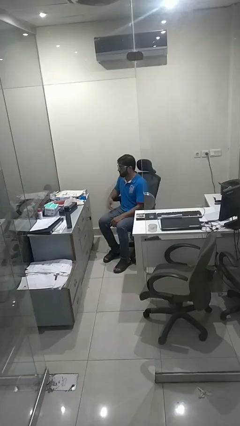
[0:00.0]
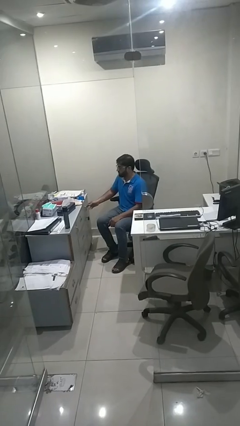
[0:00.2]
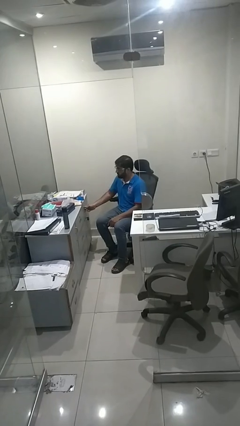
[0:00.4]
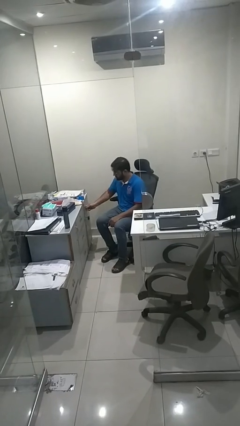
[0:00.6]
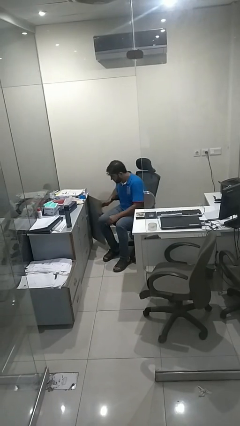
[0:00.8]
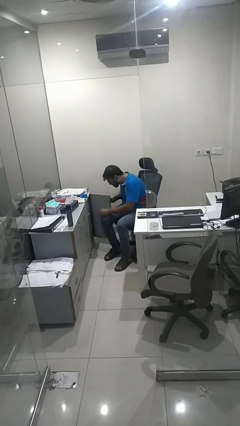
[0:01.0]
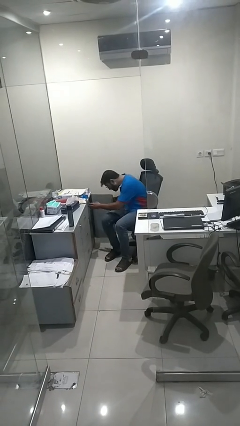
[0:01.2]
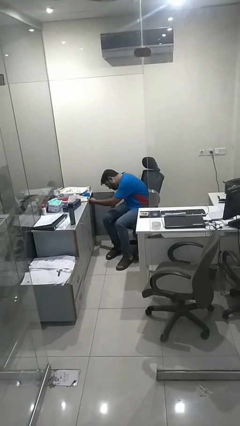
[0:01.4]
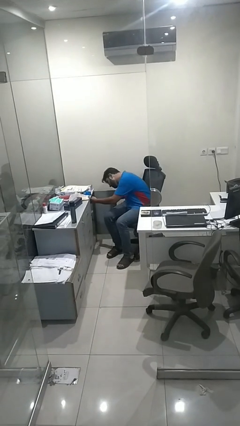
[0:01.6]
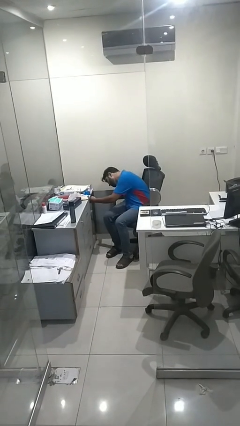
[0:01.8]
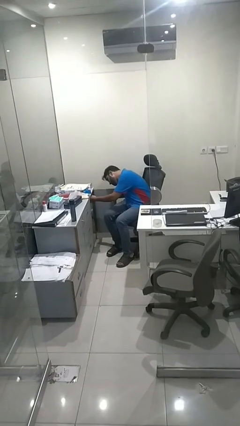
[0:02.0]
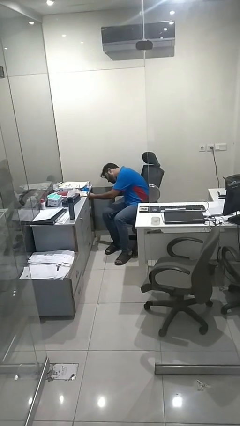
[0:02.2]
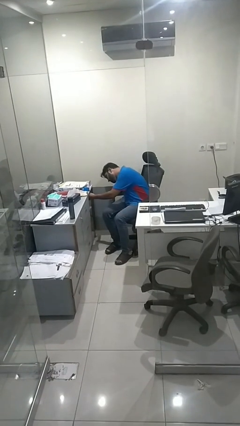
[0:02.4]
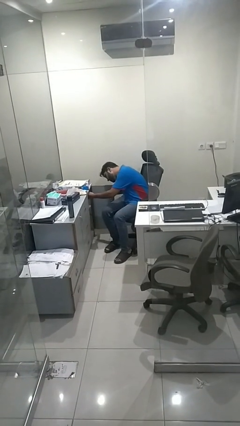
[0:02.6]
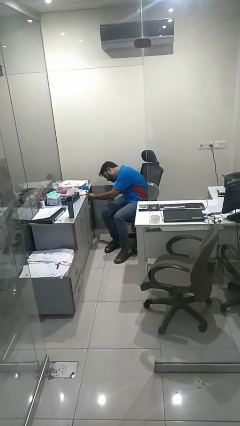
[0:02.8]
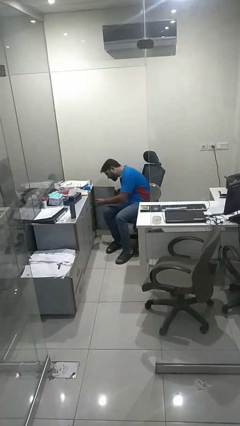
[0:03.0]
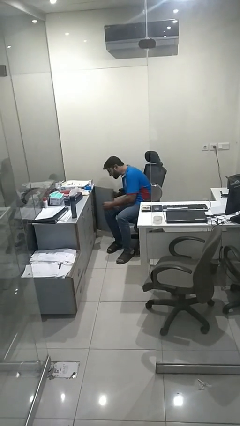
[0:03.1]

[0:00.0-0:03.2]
person searches in cabinet

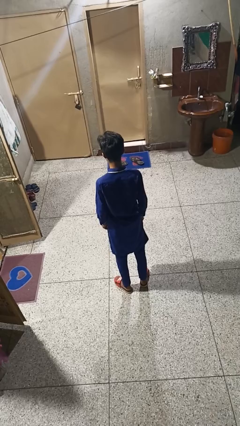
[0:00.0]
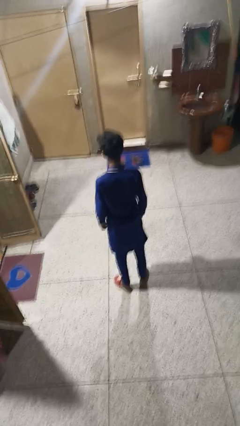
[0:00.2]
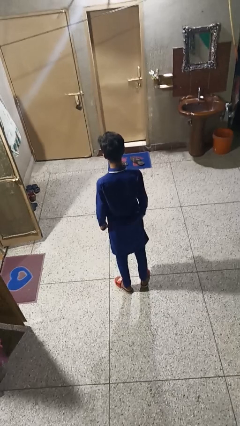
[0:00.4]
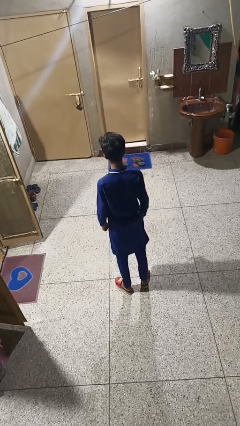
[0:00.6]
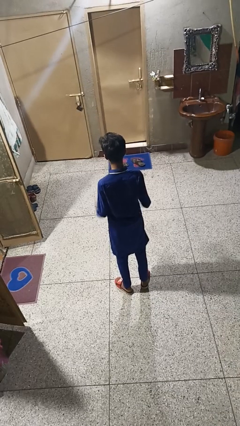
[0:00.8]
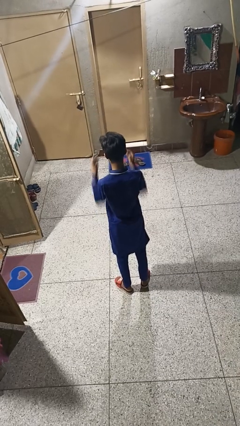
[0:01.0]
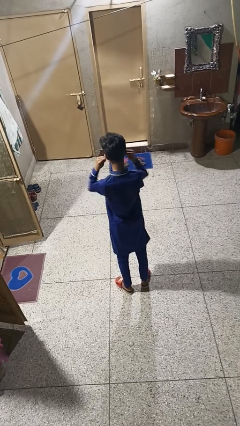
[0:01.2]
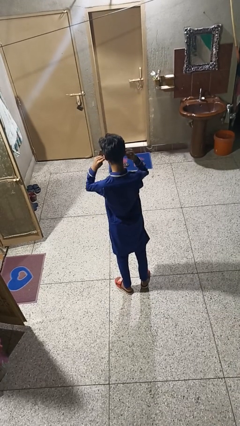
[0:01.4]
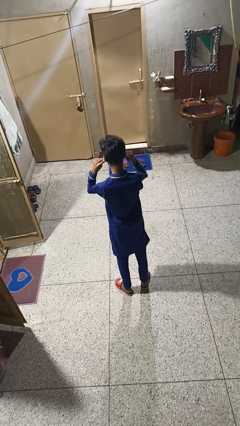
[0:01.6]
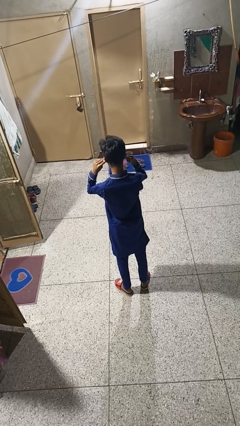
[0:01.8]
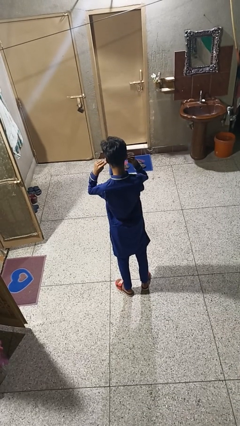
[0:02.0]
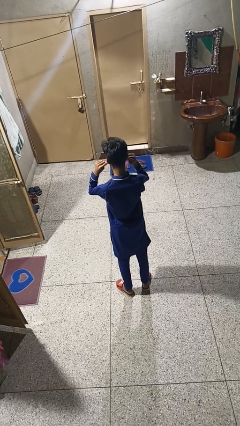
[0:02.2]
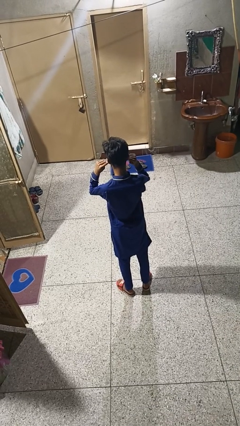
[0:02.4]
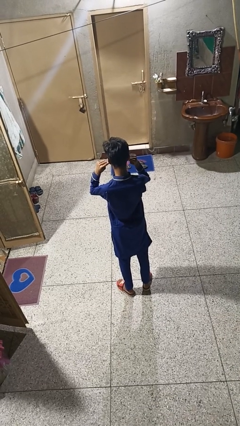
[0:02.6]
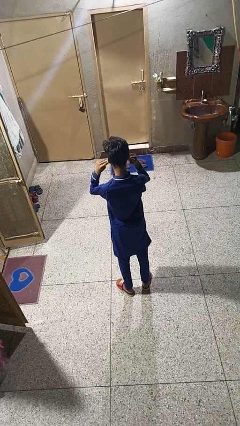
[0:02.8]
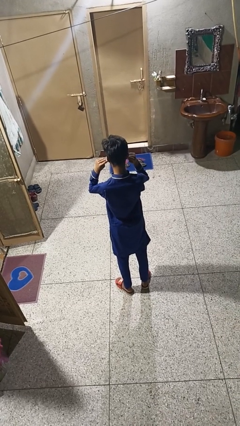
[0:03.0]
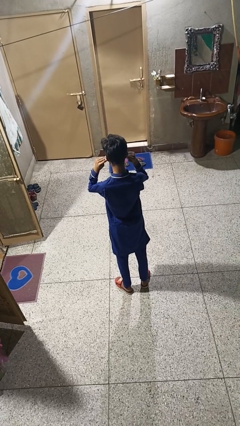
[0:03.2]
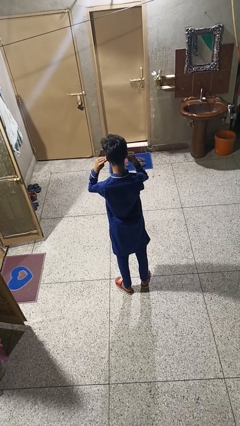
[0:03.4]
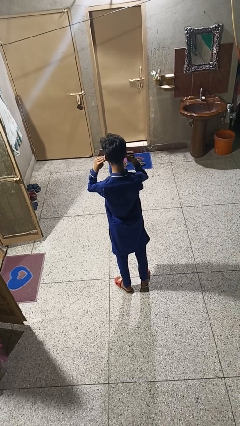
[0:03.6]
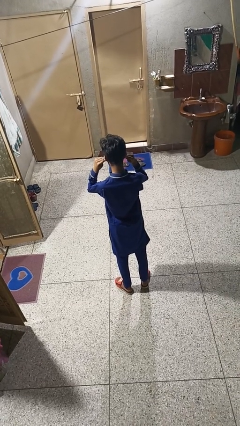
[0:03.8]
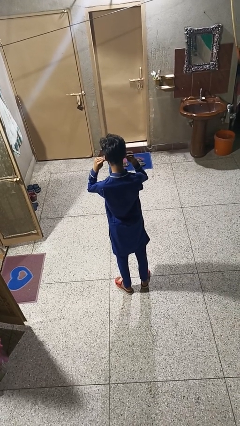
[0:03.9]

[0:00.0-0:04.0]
person puts fingers in ear

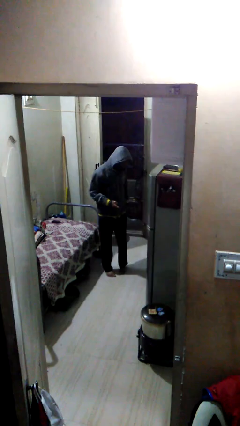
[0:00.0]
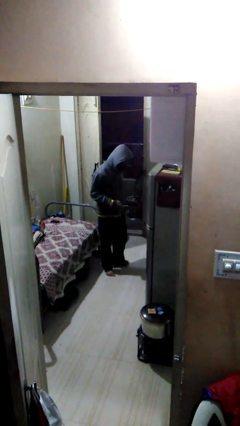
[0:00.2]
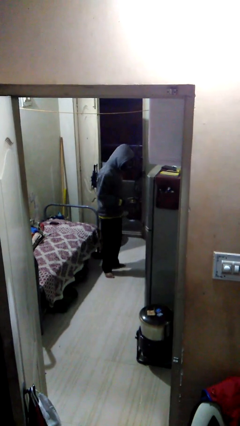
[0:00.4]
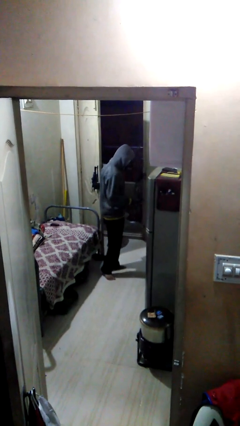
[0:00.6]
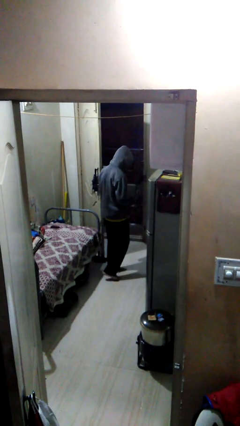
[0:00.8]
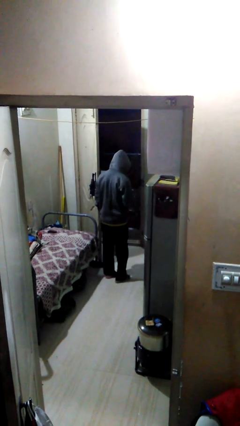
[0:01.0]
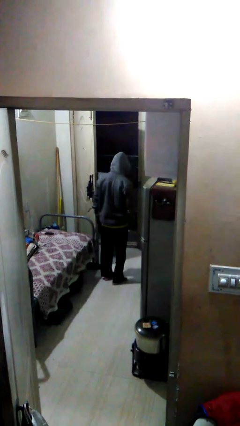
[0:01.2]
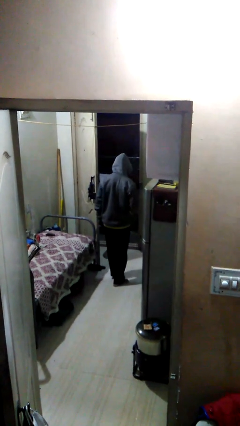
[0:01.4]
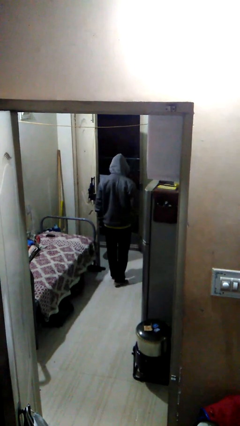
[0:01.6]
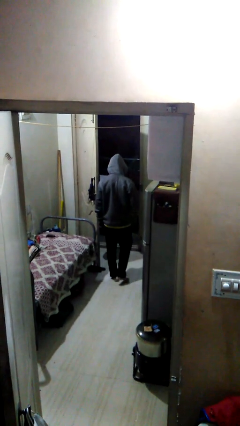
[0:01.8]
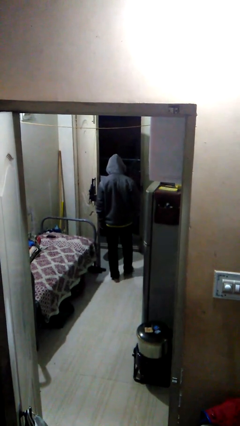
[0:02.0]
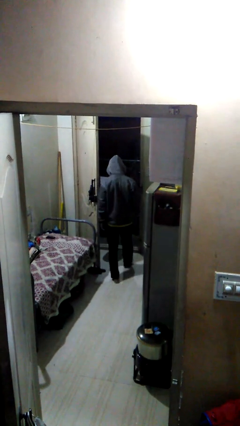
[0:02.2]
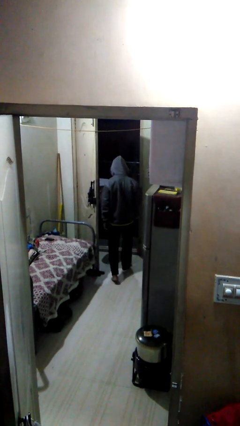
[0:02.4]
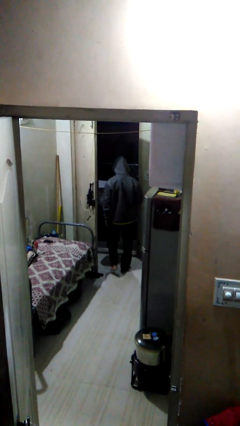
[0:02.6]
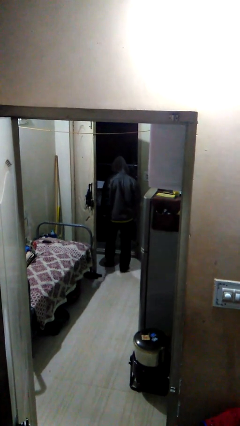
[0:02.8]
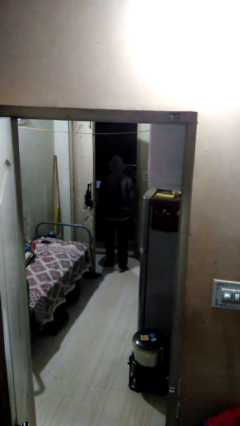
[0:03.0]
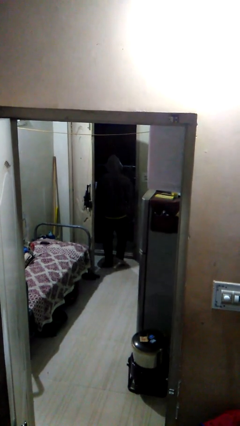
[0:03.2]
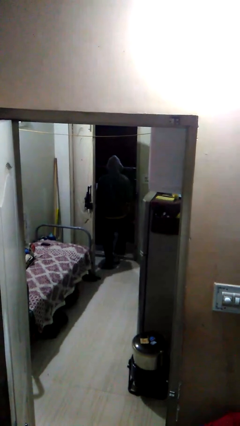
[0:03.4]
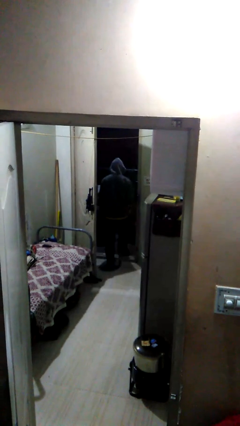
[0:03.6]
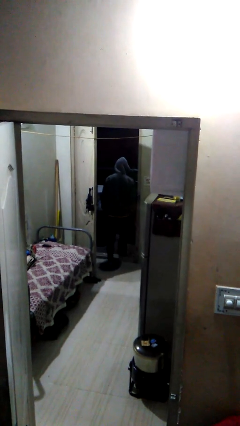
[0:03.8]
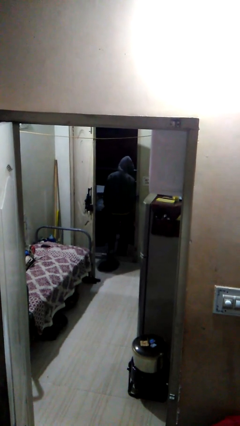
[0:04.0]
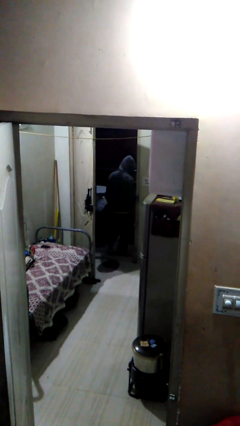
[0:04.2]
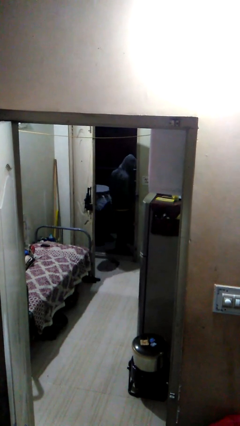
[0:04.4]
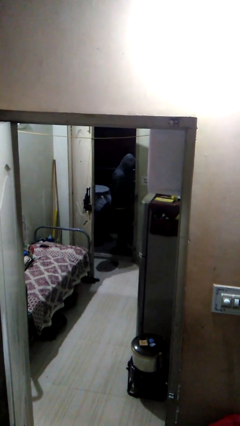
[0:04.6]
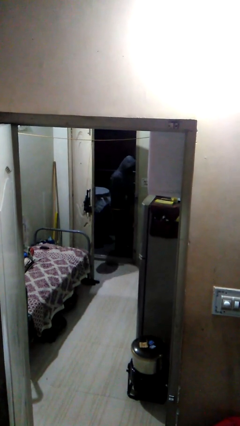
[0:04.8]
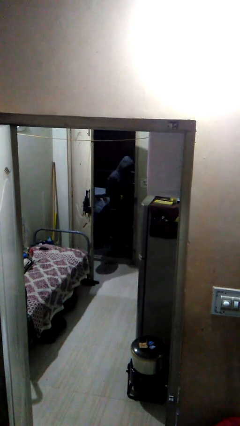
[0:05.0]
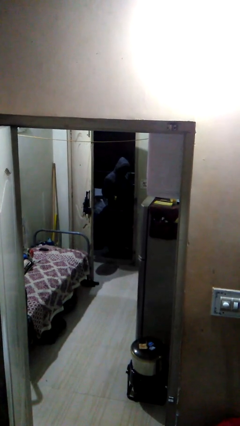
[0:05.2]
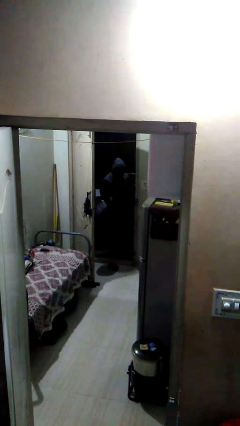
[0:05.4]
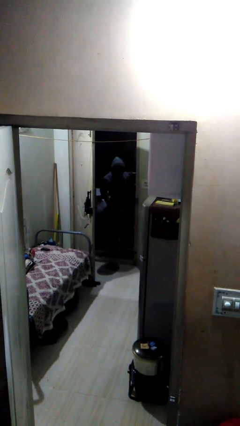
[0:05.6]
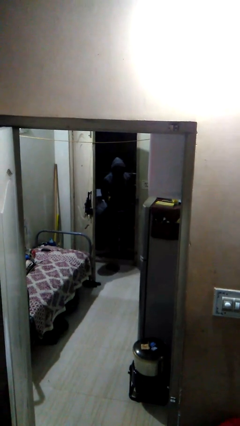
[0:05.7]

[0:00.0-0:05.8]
person exits scene through structure

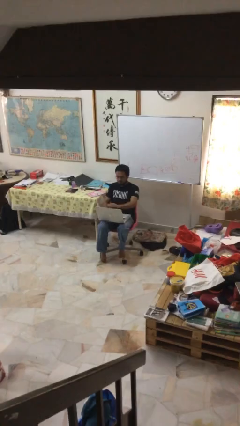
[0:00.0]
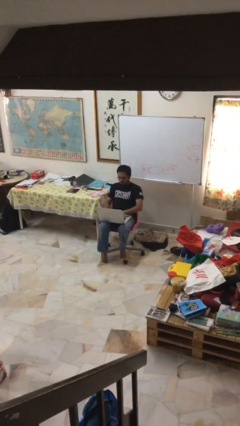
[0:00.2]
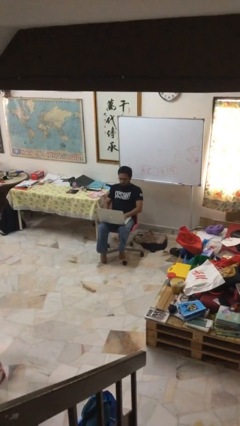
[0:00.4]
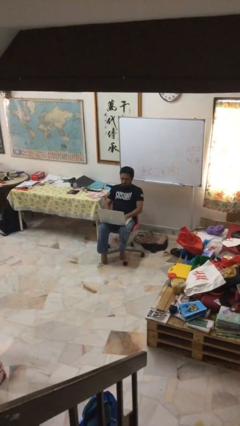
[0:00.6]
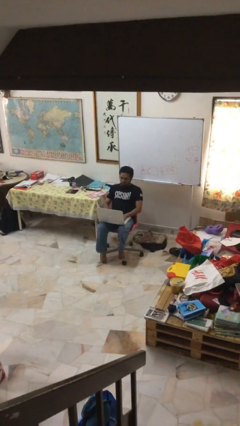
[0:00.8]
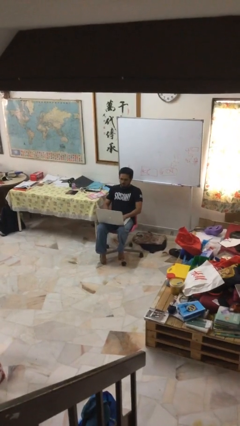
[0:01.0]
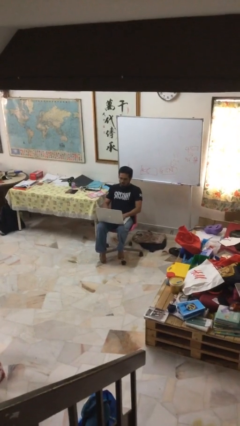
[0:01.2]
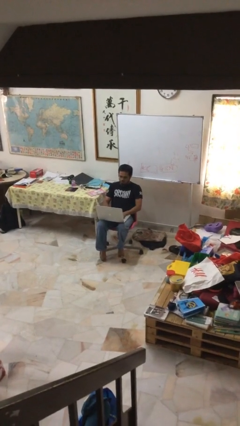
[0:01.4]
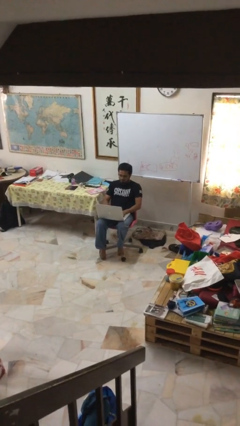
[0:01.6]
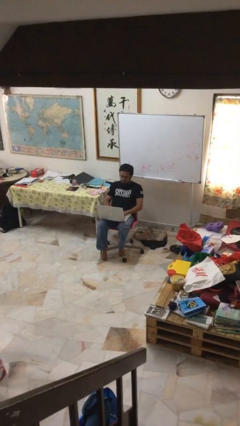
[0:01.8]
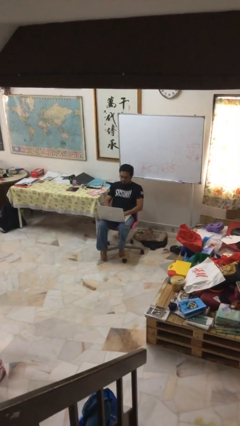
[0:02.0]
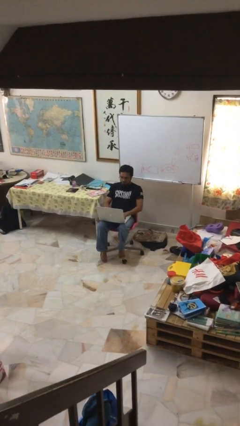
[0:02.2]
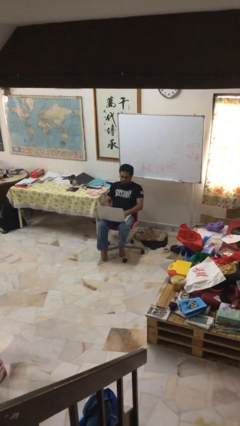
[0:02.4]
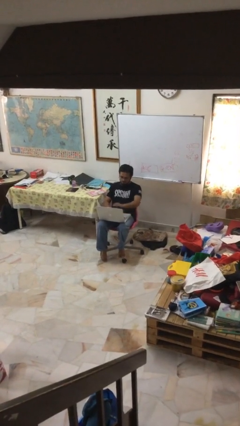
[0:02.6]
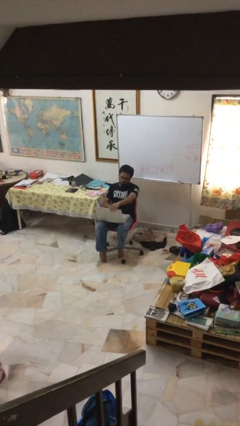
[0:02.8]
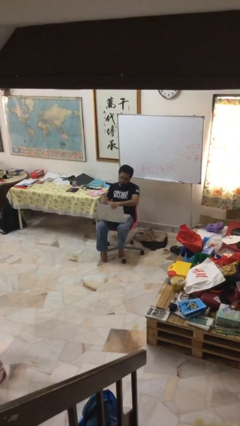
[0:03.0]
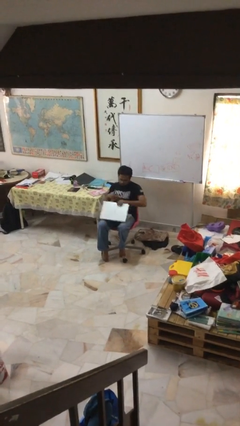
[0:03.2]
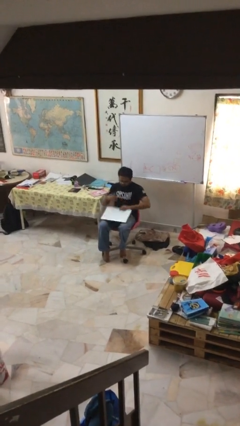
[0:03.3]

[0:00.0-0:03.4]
person interacts with laptop

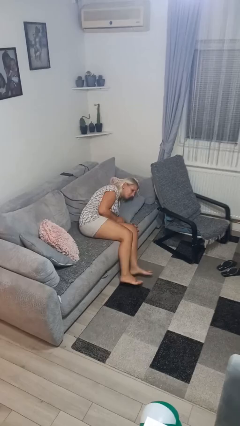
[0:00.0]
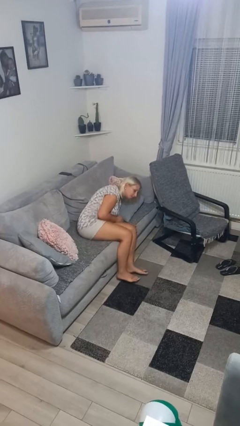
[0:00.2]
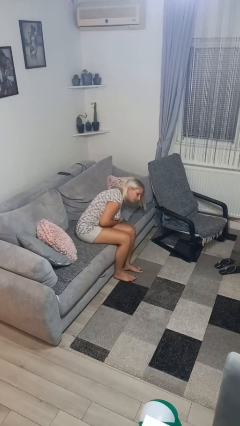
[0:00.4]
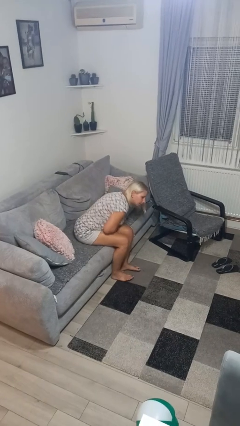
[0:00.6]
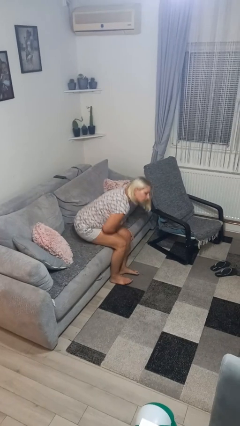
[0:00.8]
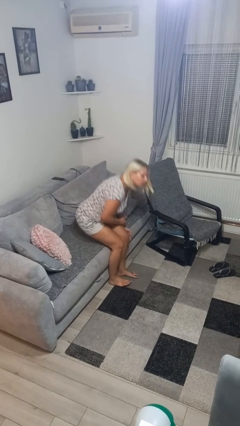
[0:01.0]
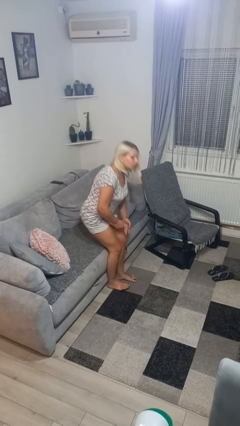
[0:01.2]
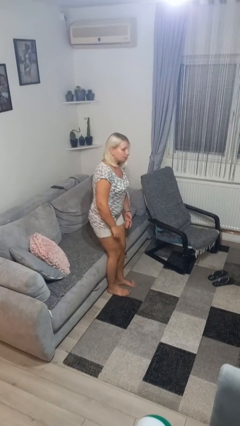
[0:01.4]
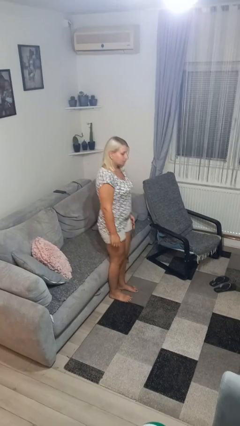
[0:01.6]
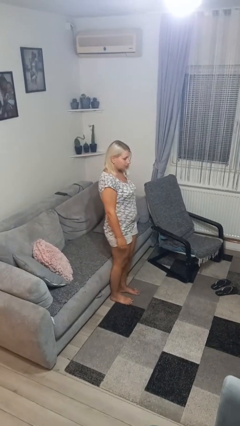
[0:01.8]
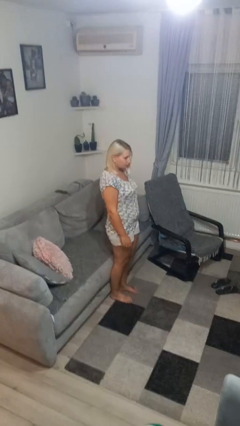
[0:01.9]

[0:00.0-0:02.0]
person stands up
